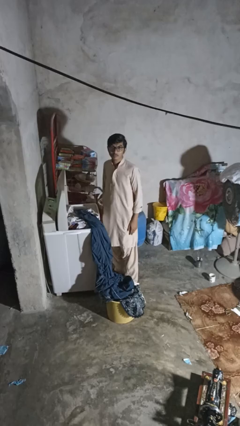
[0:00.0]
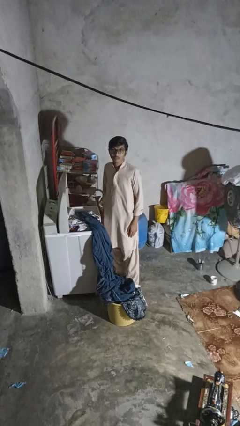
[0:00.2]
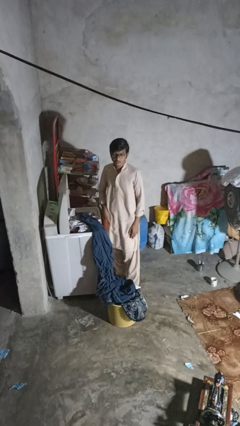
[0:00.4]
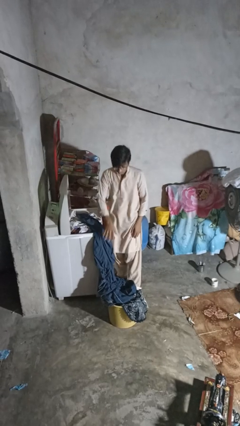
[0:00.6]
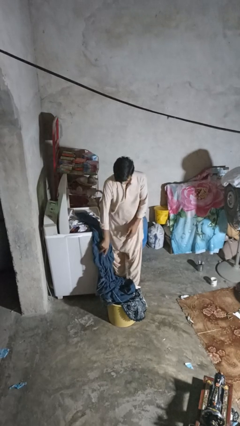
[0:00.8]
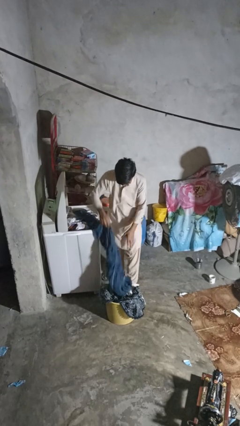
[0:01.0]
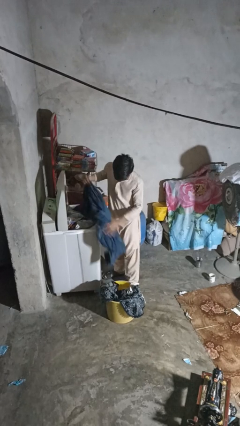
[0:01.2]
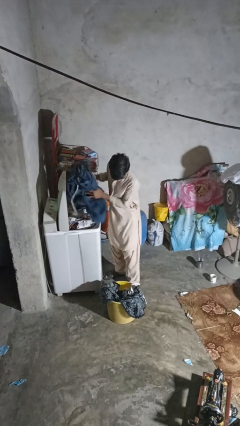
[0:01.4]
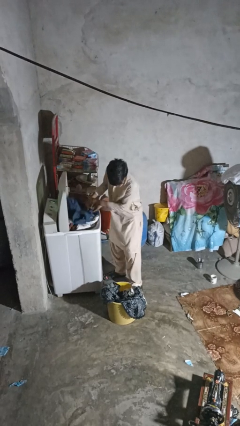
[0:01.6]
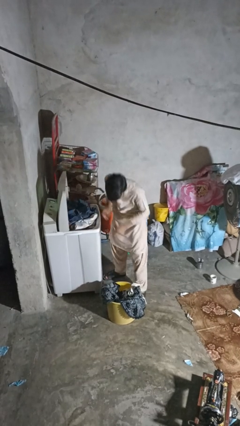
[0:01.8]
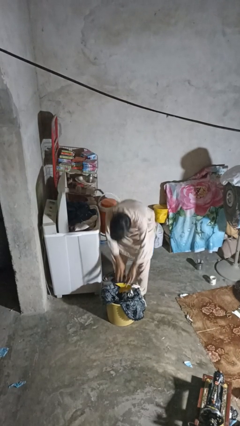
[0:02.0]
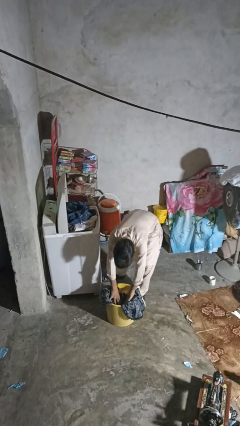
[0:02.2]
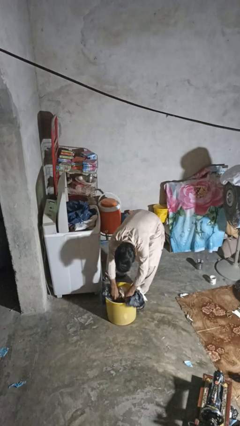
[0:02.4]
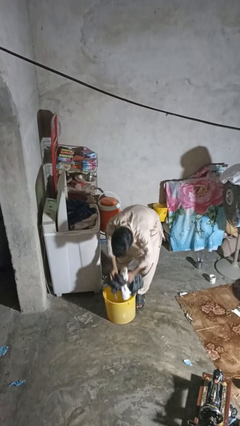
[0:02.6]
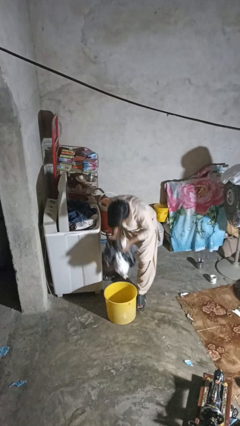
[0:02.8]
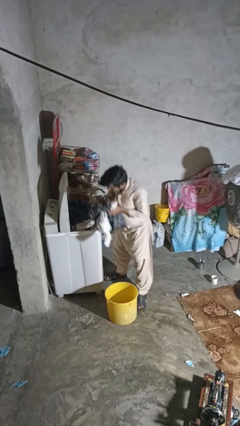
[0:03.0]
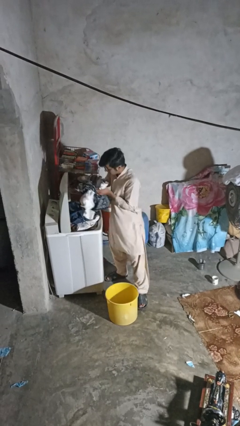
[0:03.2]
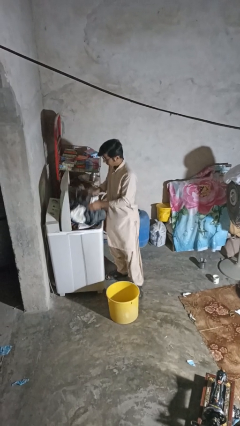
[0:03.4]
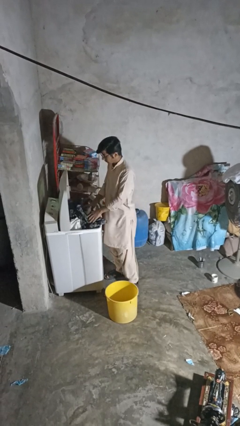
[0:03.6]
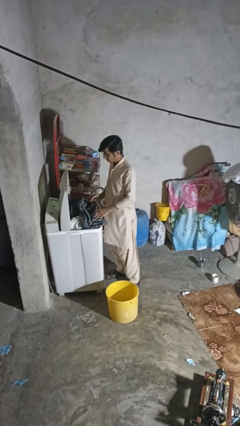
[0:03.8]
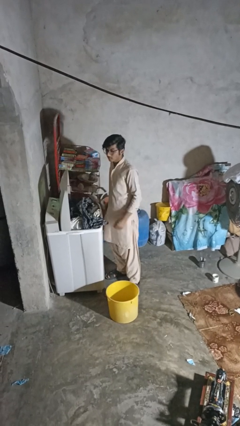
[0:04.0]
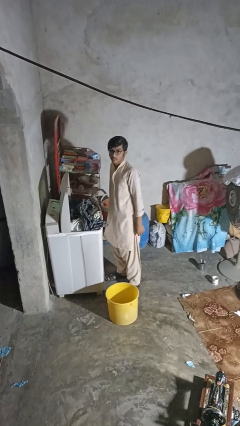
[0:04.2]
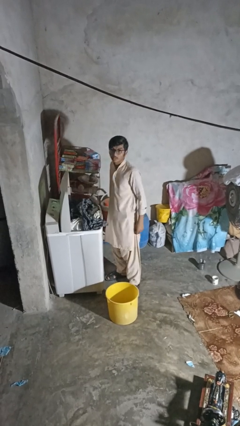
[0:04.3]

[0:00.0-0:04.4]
person loads clotheswasher

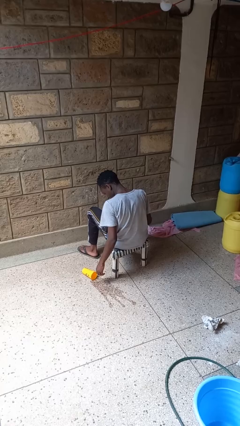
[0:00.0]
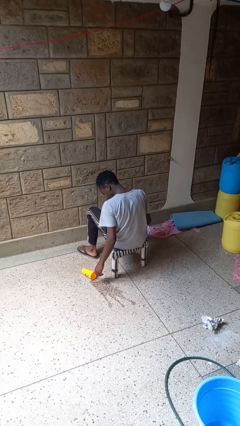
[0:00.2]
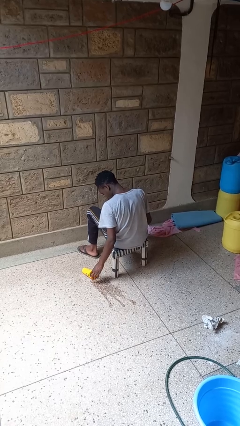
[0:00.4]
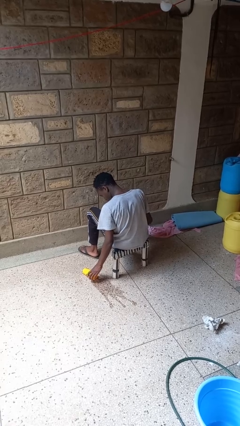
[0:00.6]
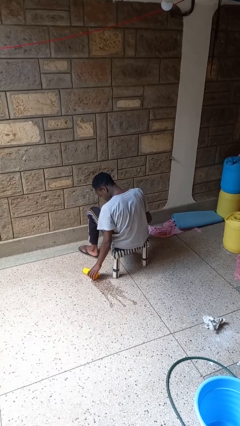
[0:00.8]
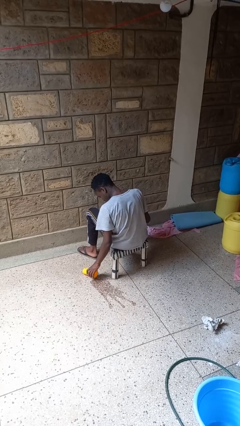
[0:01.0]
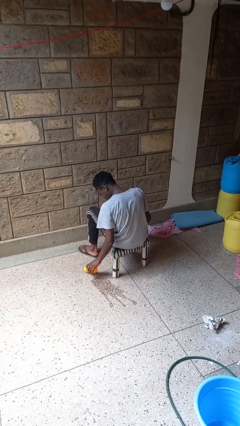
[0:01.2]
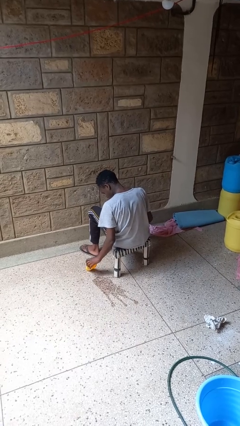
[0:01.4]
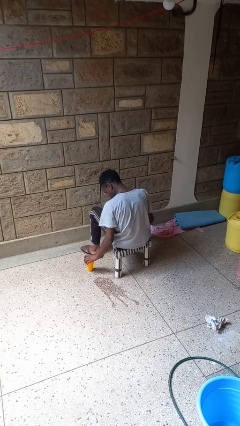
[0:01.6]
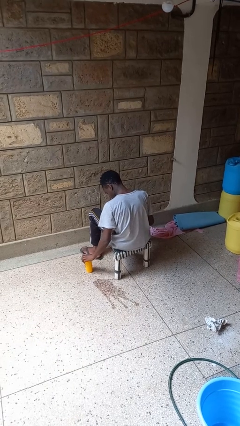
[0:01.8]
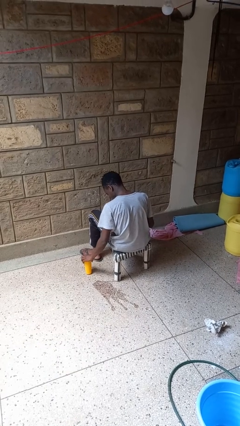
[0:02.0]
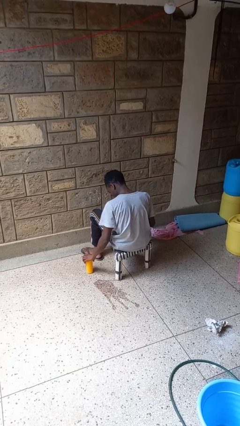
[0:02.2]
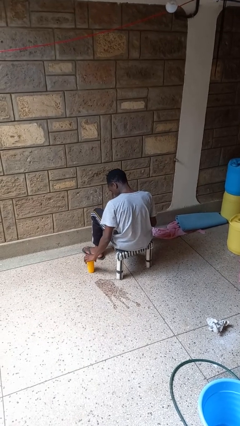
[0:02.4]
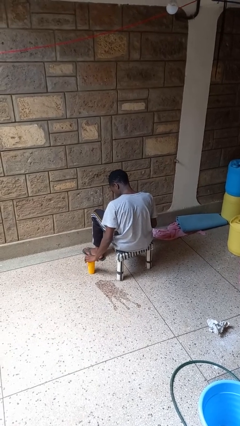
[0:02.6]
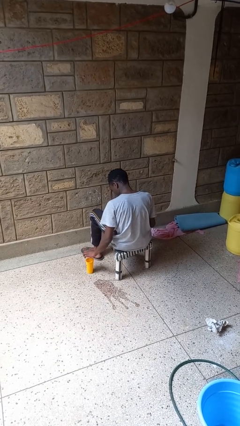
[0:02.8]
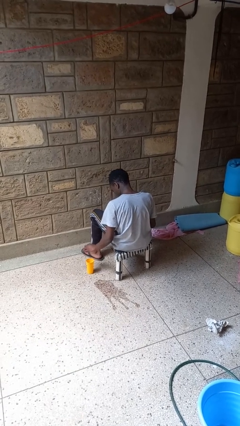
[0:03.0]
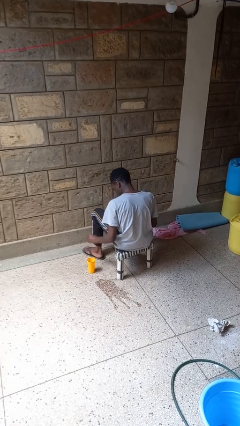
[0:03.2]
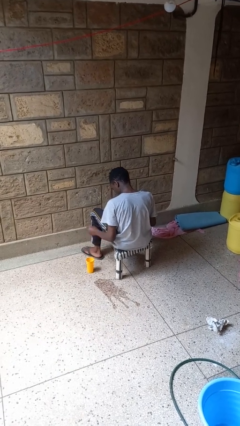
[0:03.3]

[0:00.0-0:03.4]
person sets upright glass

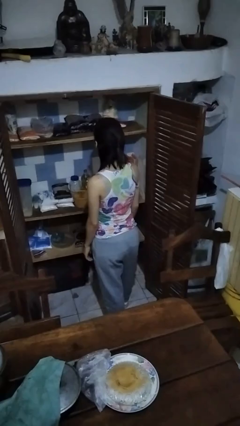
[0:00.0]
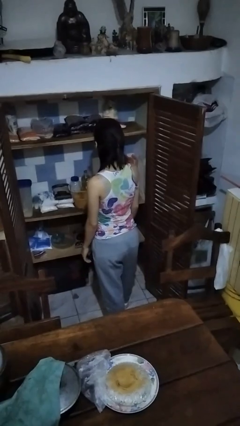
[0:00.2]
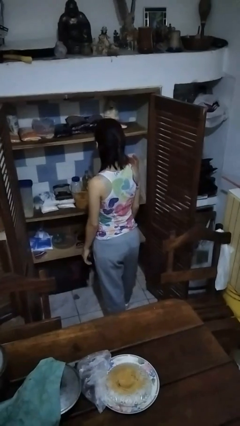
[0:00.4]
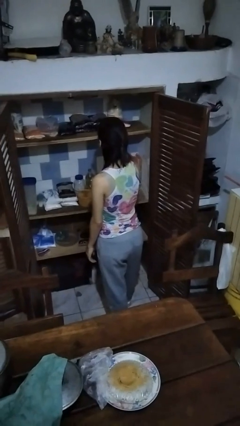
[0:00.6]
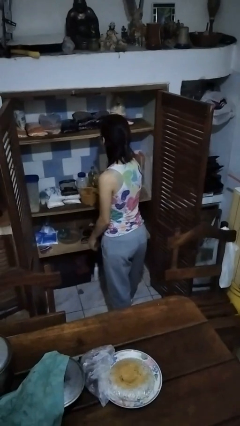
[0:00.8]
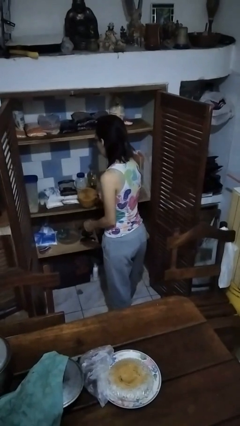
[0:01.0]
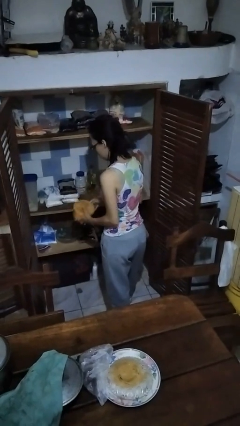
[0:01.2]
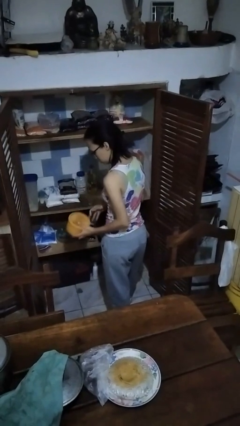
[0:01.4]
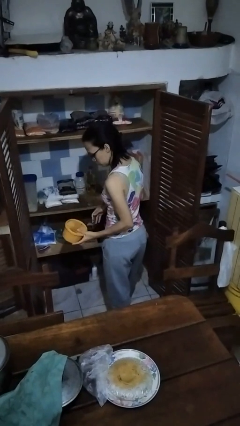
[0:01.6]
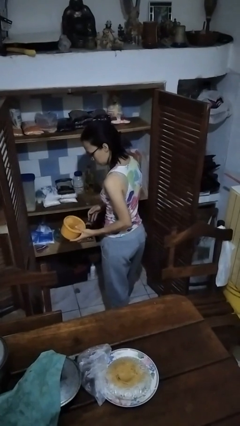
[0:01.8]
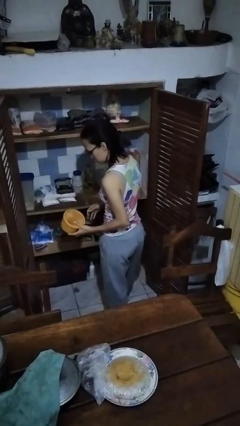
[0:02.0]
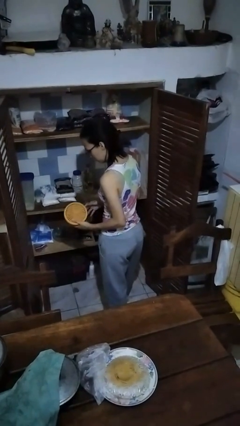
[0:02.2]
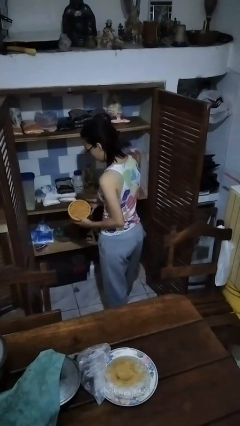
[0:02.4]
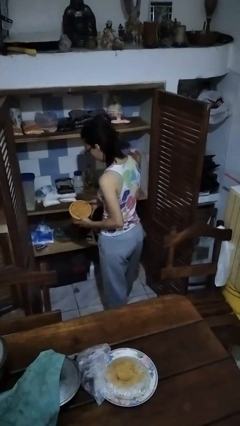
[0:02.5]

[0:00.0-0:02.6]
person takes object from cabinet

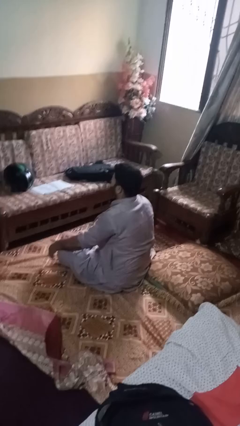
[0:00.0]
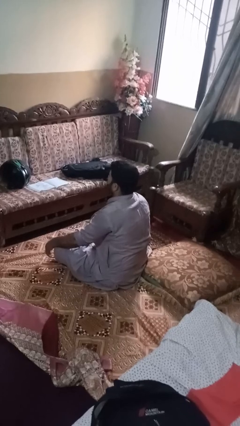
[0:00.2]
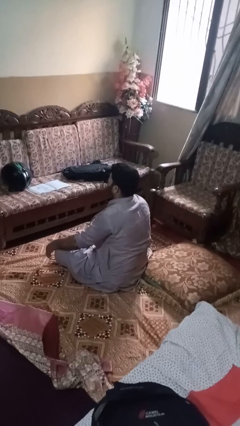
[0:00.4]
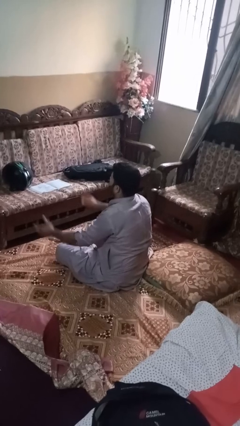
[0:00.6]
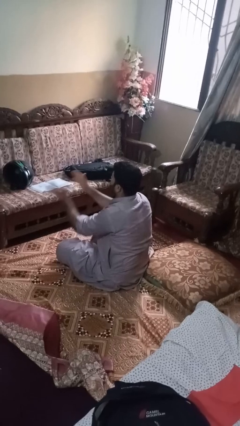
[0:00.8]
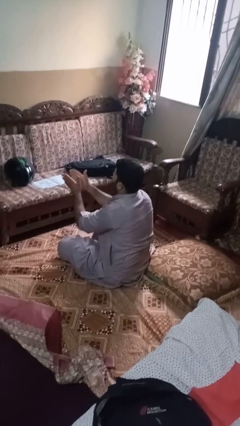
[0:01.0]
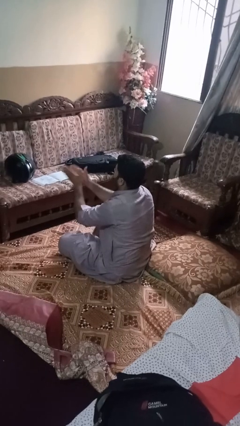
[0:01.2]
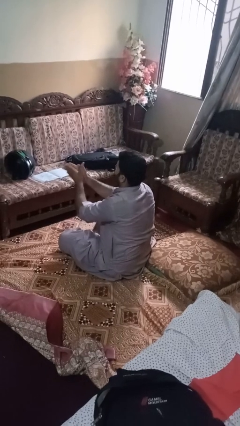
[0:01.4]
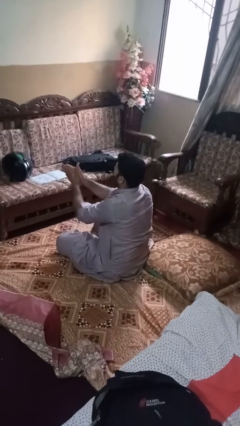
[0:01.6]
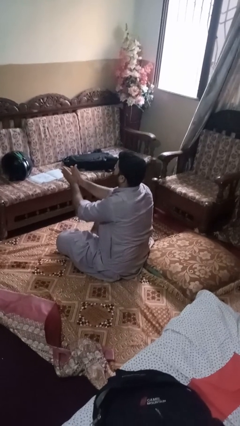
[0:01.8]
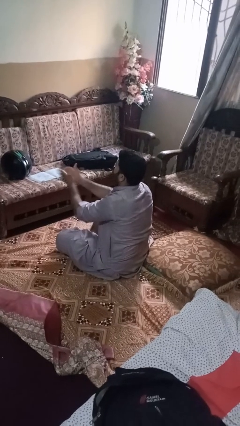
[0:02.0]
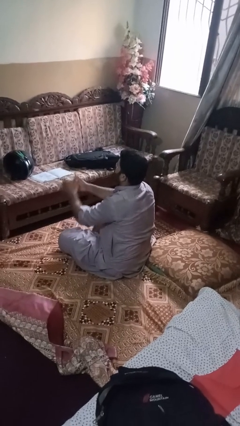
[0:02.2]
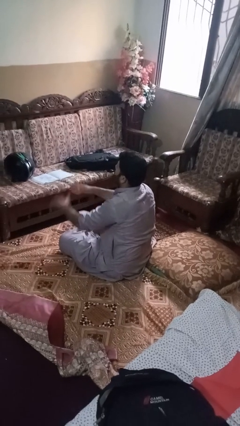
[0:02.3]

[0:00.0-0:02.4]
person claps hands

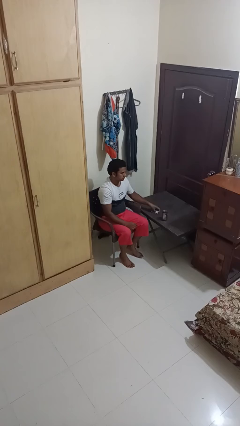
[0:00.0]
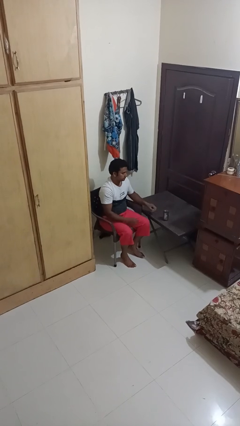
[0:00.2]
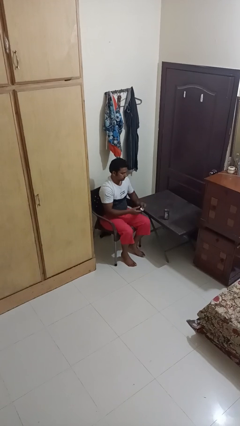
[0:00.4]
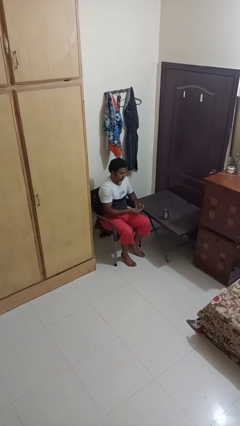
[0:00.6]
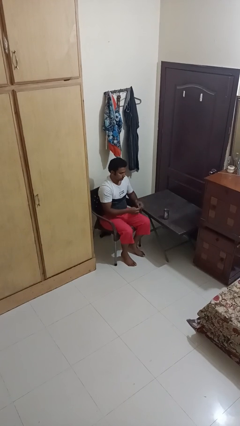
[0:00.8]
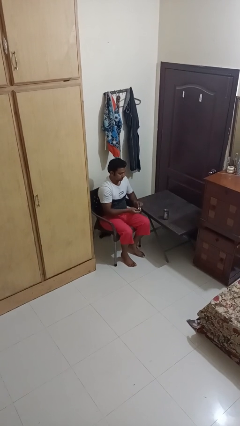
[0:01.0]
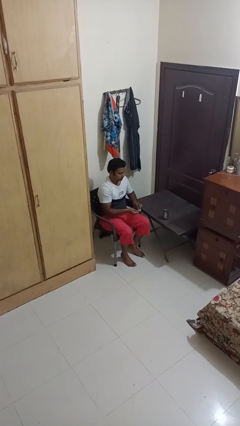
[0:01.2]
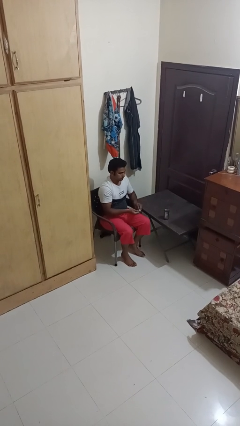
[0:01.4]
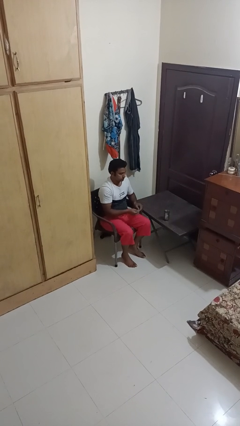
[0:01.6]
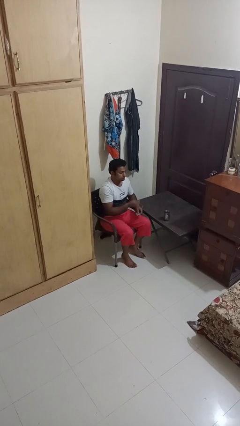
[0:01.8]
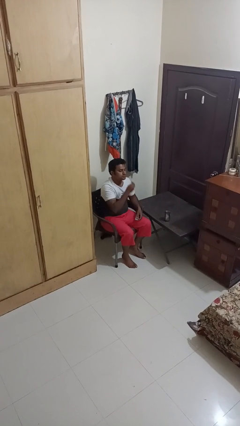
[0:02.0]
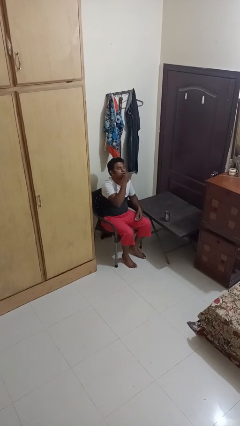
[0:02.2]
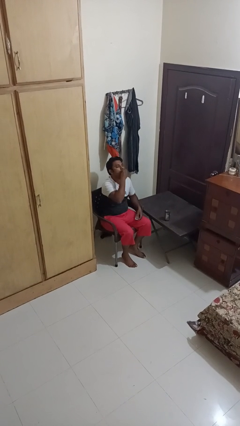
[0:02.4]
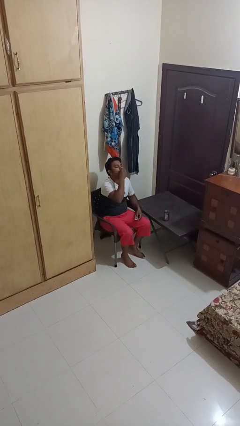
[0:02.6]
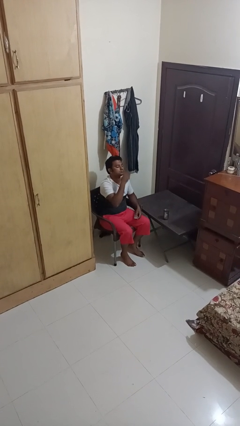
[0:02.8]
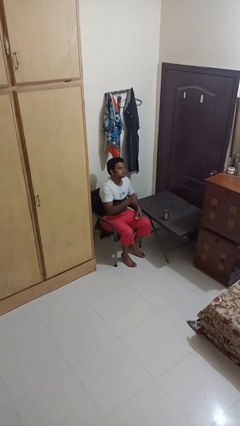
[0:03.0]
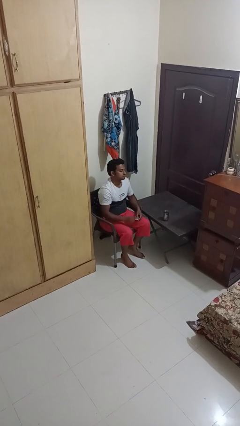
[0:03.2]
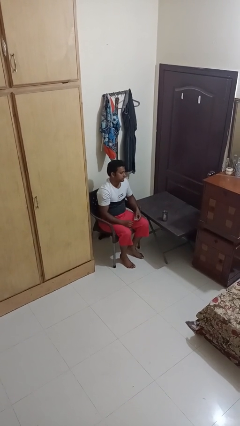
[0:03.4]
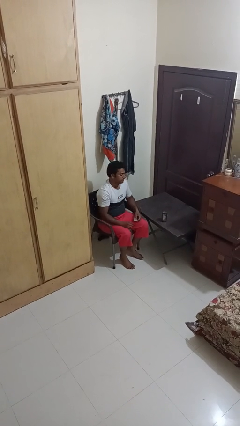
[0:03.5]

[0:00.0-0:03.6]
person takes medicine pills

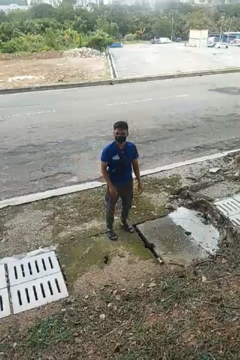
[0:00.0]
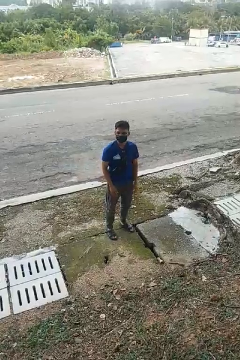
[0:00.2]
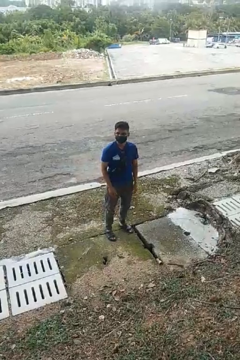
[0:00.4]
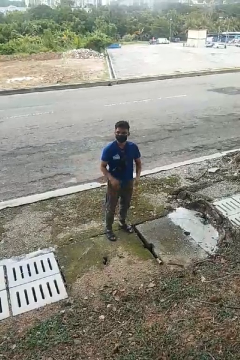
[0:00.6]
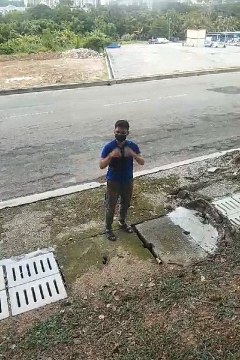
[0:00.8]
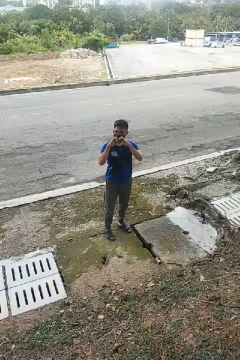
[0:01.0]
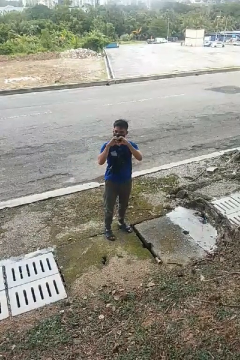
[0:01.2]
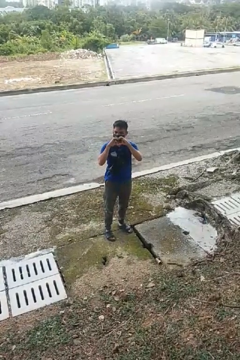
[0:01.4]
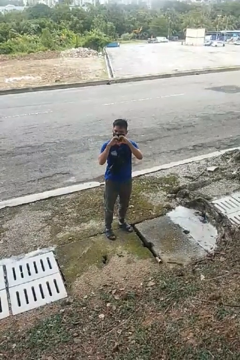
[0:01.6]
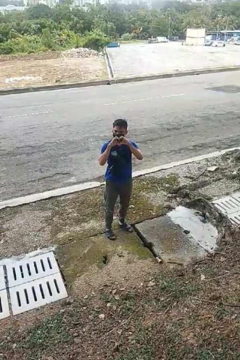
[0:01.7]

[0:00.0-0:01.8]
person gestures heart
